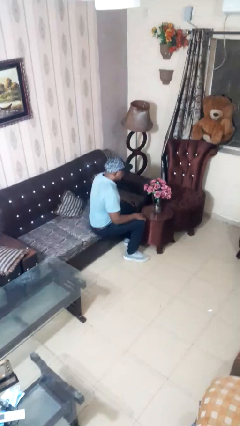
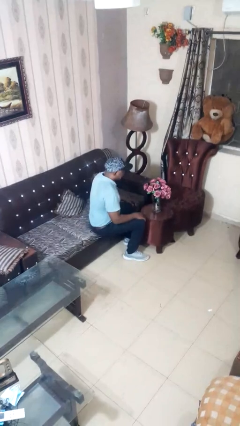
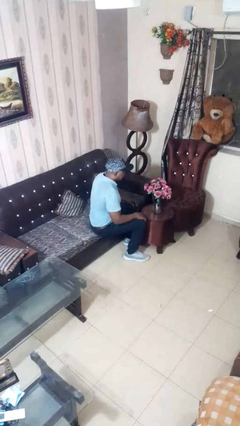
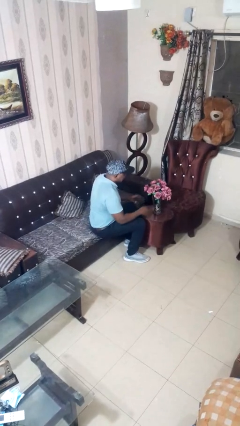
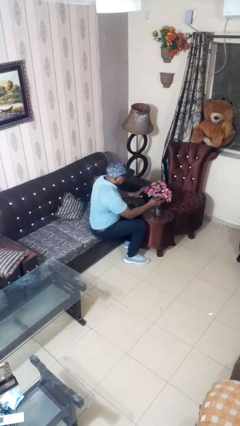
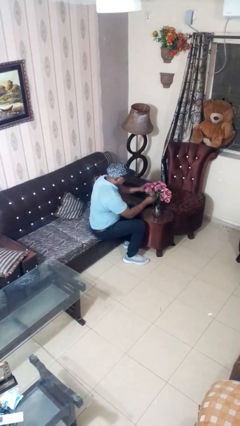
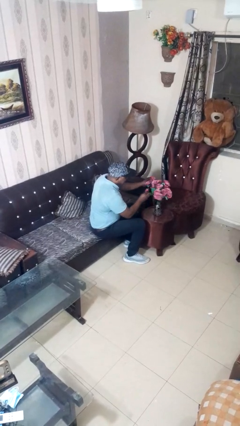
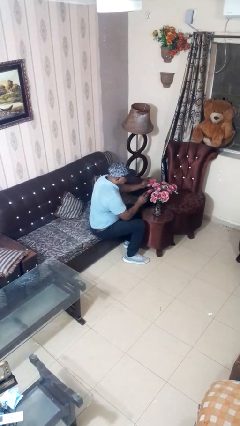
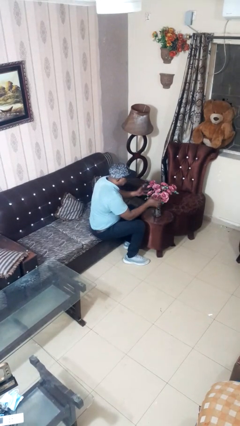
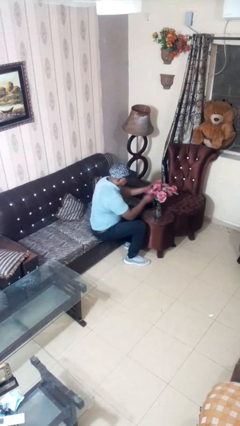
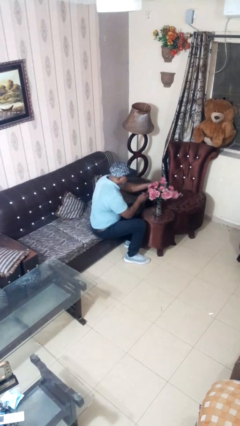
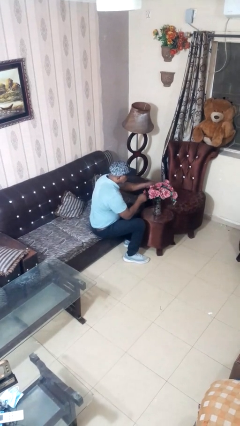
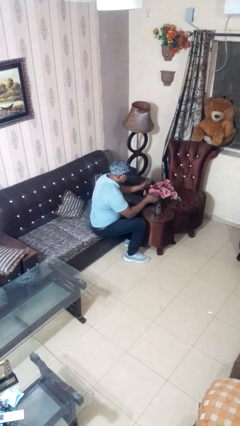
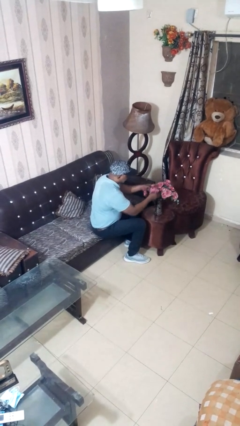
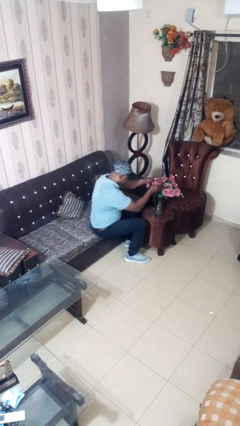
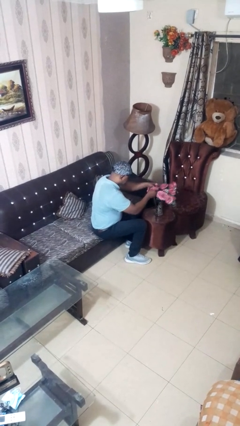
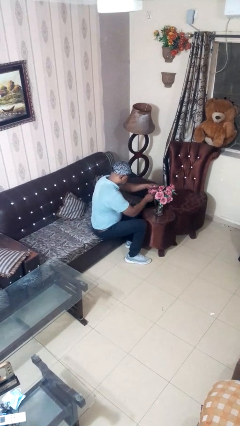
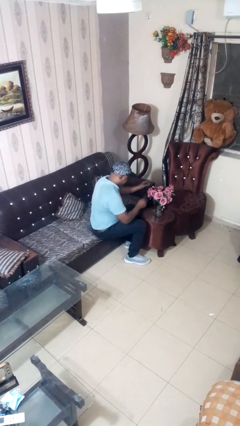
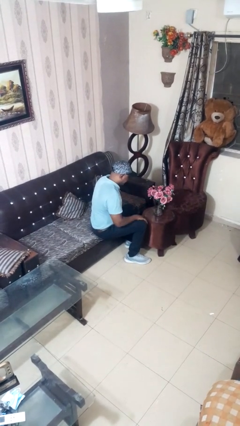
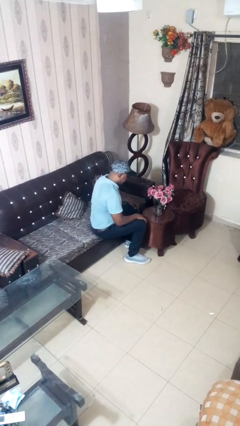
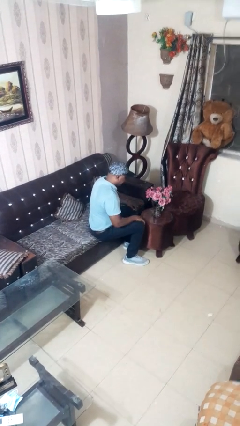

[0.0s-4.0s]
person arranges flowers in vase

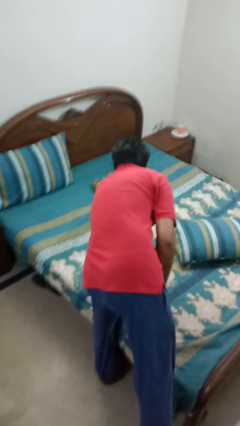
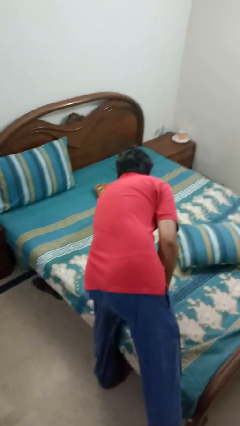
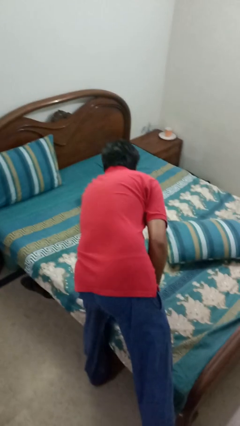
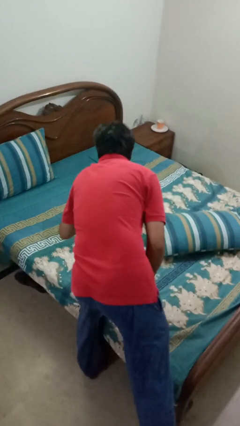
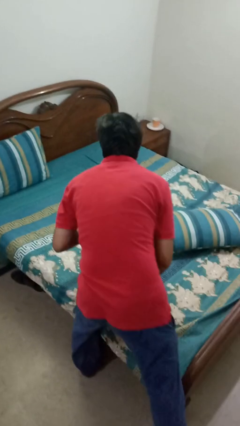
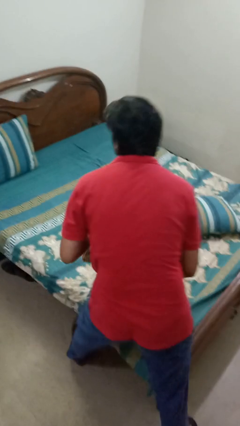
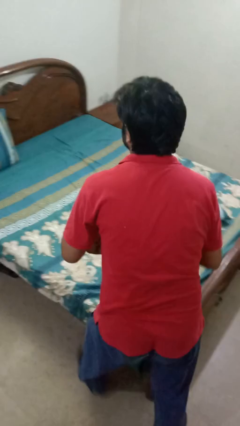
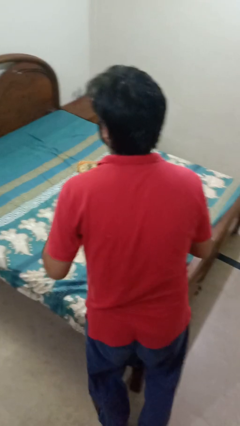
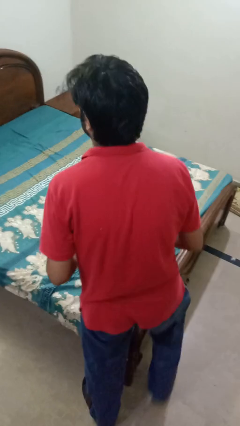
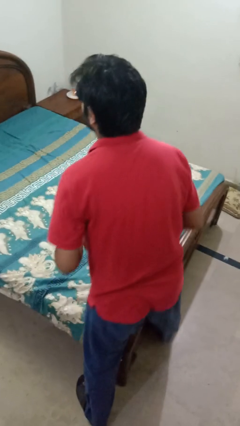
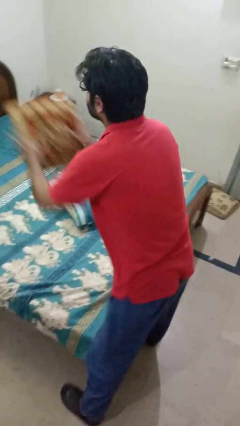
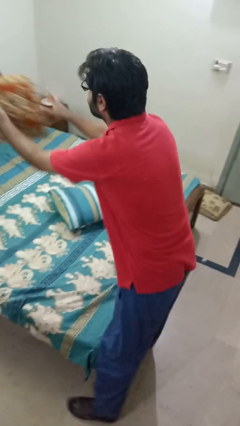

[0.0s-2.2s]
person makes bed

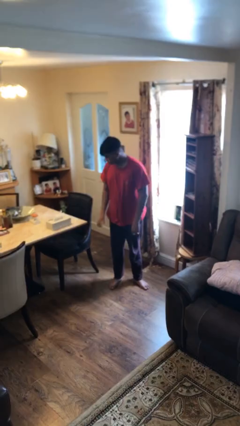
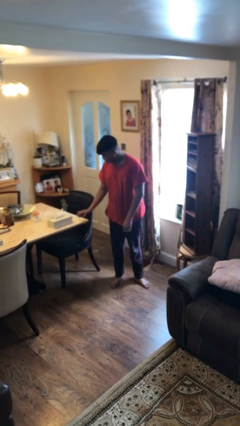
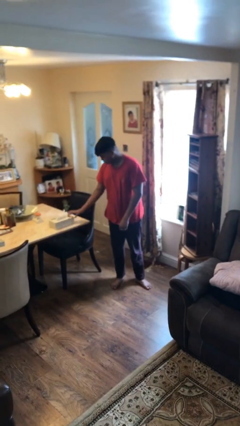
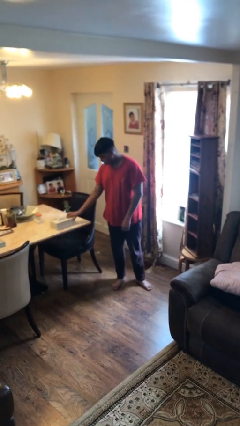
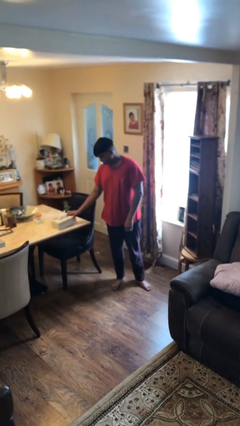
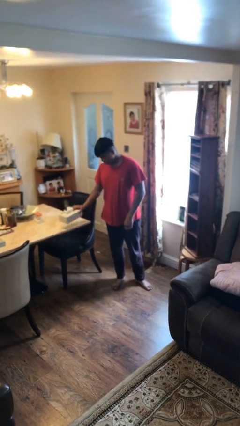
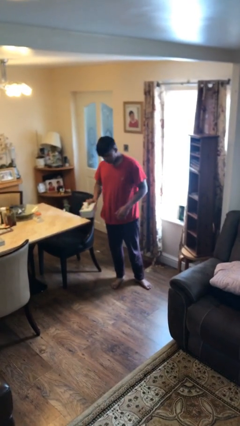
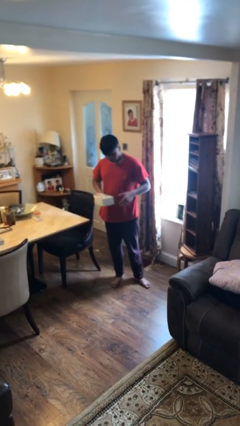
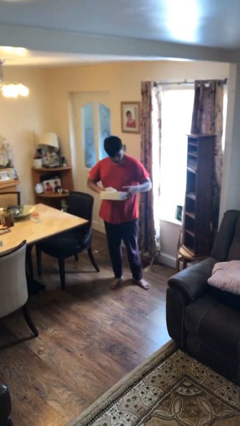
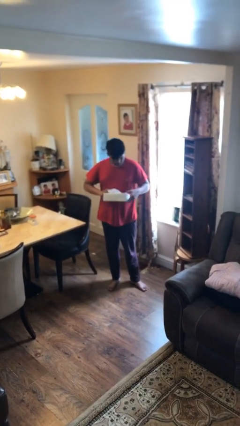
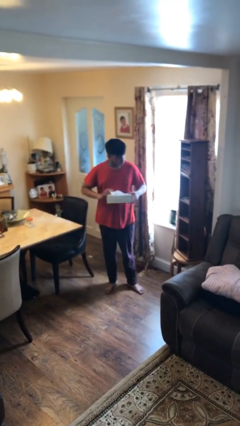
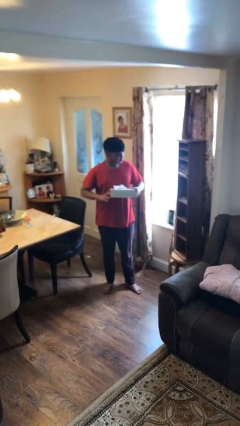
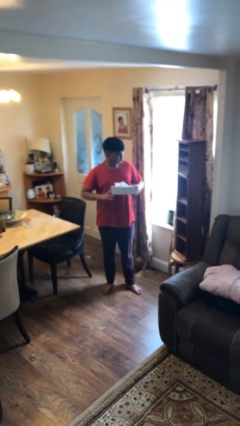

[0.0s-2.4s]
person picks up object from table

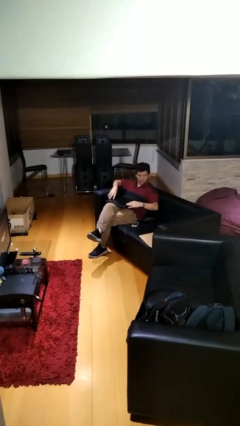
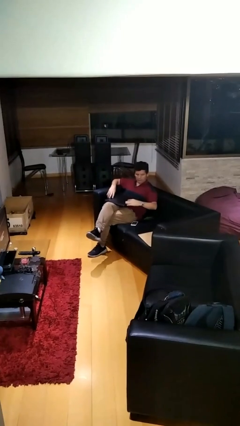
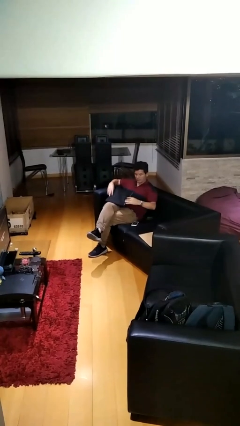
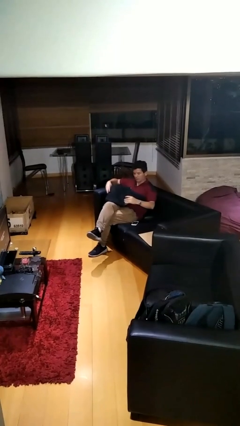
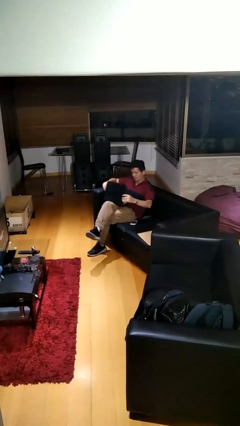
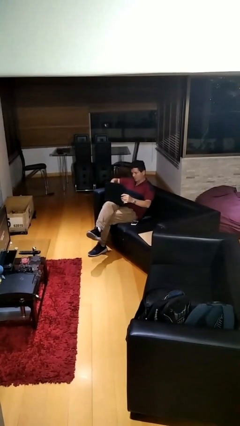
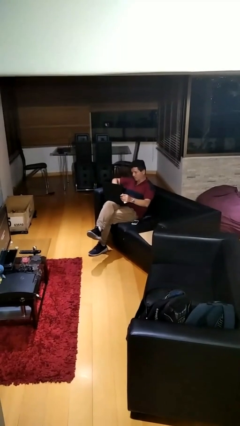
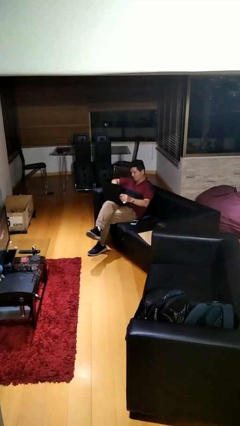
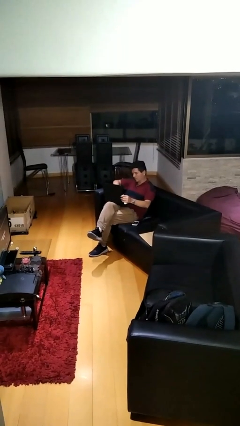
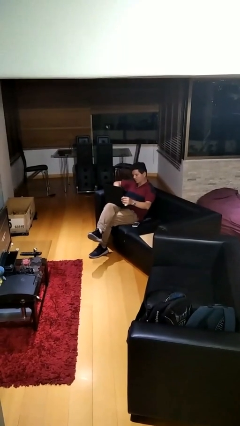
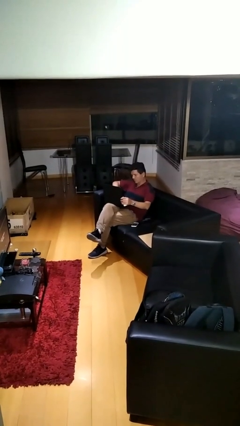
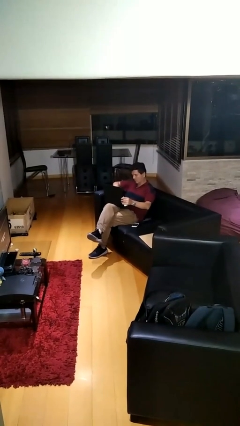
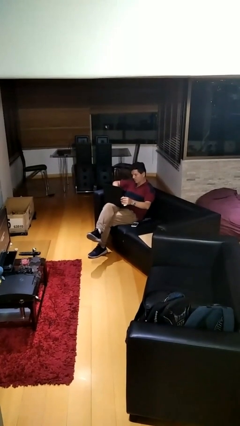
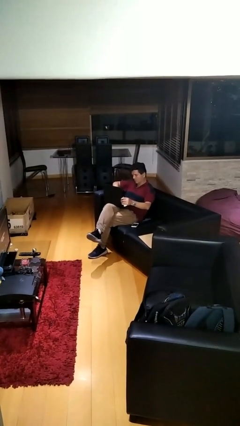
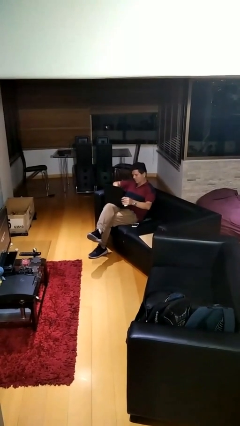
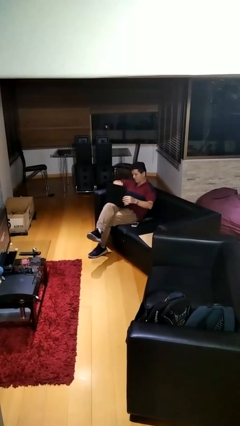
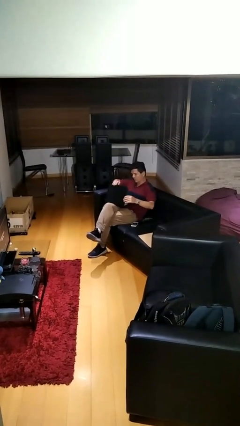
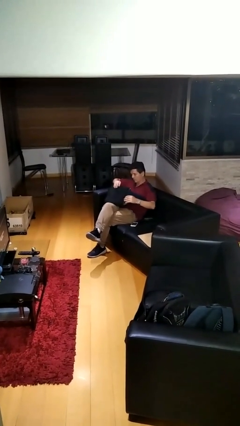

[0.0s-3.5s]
person interacts with laptop

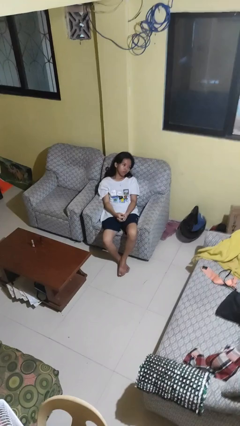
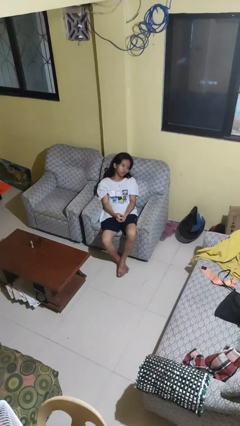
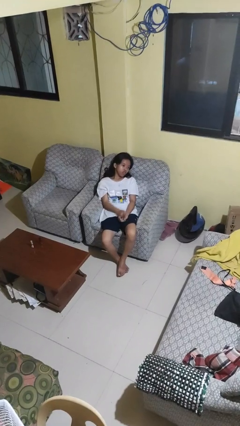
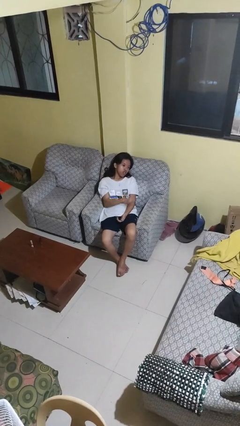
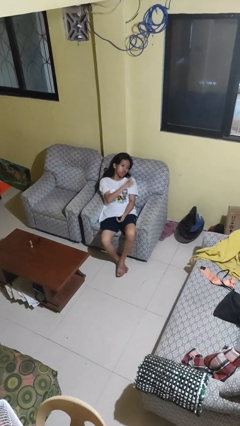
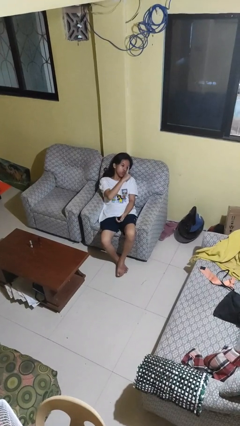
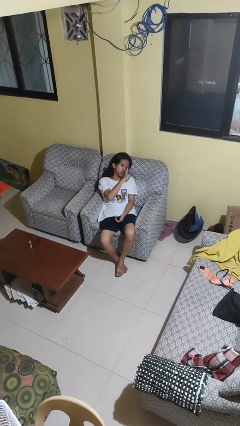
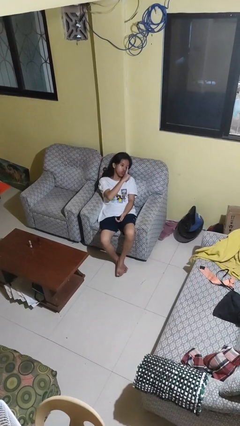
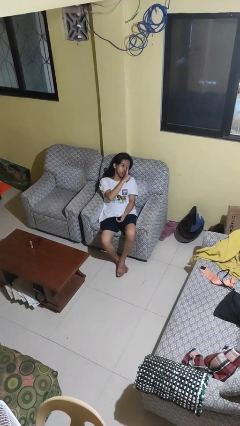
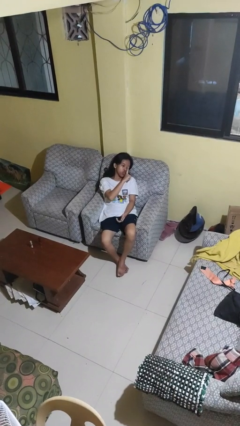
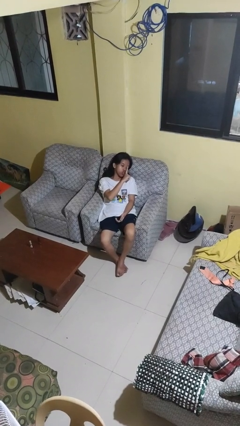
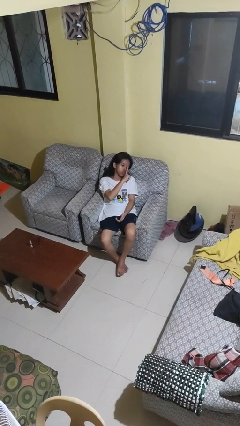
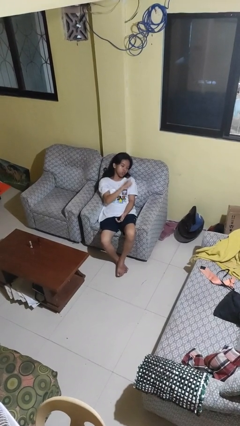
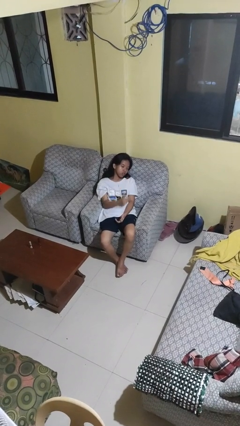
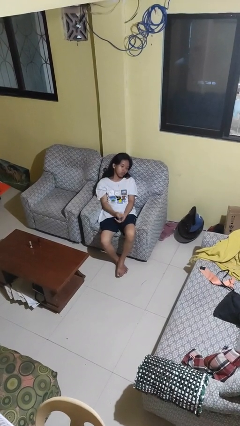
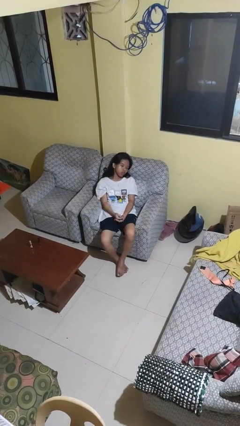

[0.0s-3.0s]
person gestures be quiet

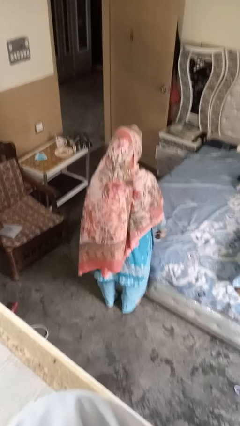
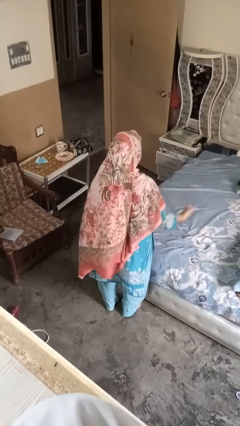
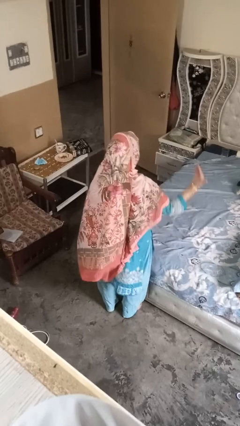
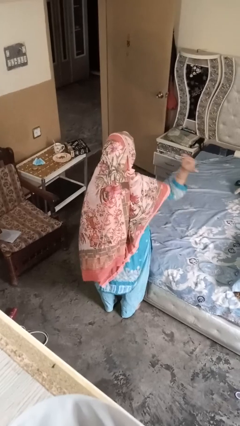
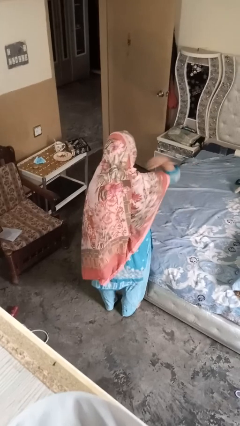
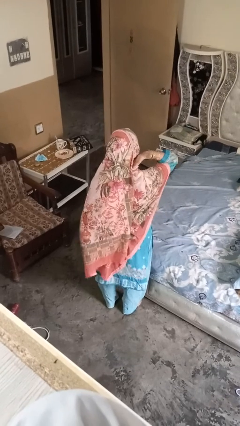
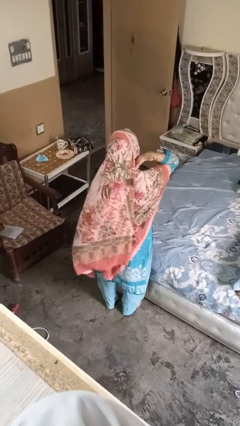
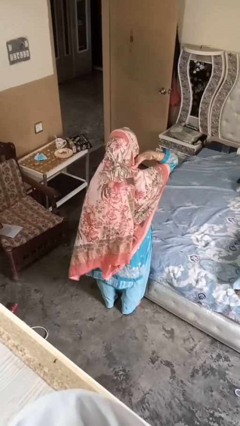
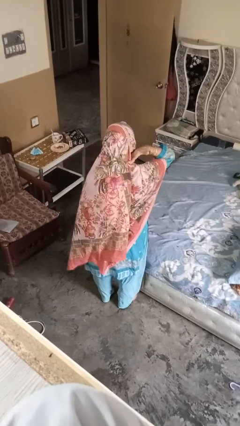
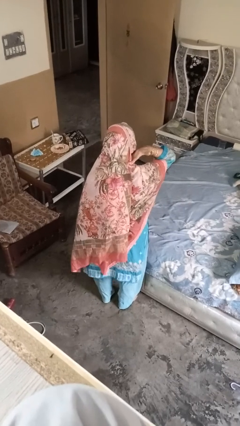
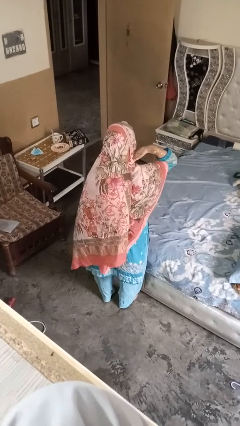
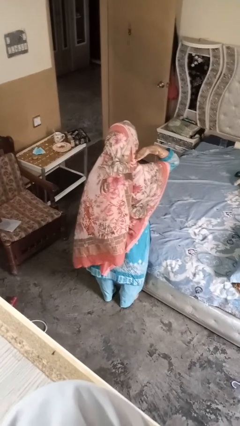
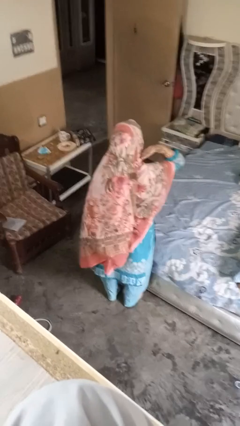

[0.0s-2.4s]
person gestures cut
